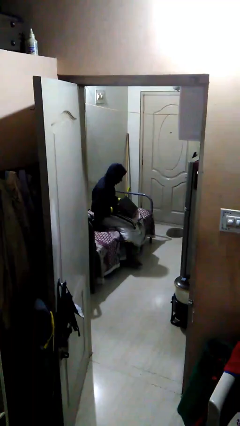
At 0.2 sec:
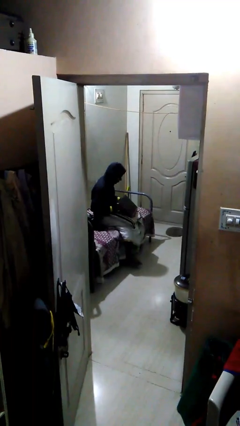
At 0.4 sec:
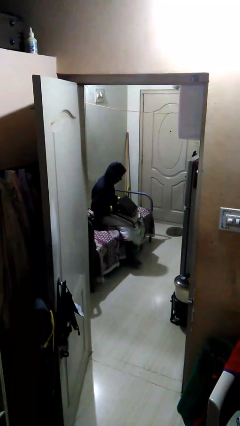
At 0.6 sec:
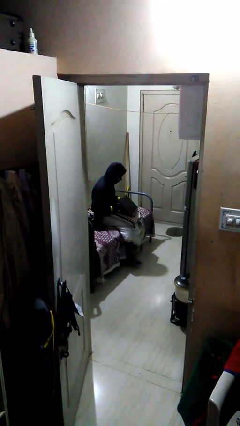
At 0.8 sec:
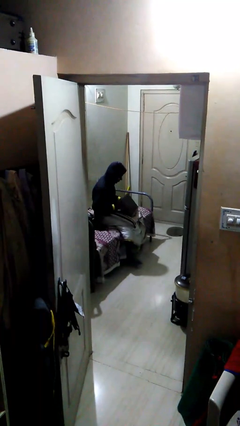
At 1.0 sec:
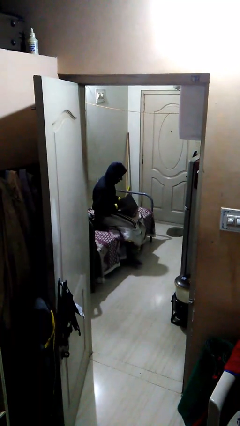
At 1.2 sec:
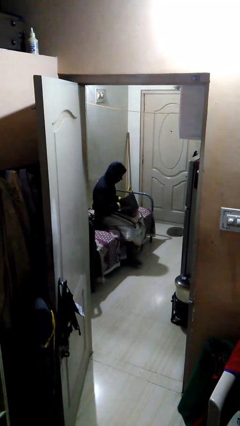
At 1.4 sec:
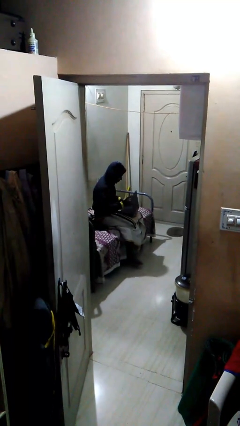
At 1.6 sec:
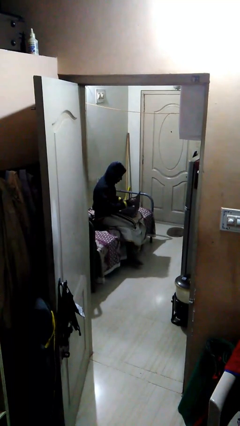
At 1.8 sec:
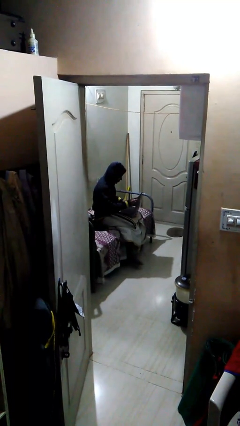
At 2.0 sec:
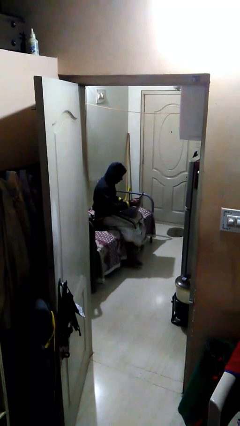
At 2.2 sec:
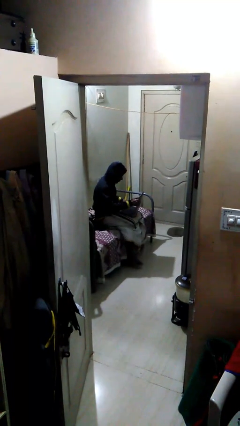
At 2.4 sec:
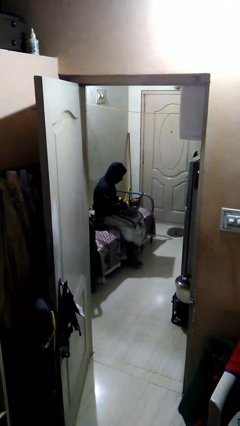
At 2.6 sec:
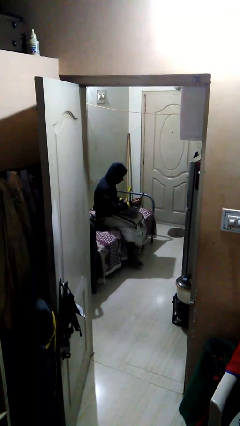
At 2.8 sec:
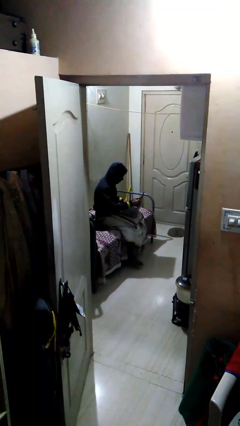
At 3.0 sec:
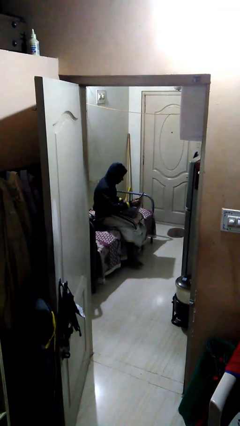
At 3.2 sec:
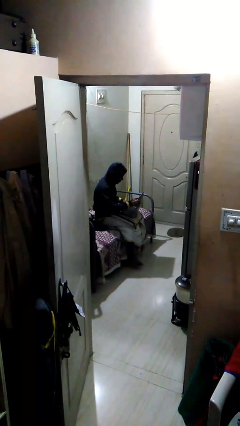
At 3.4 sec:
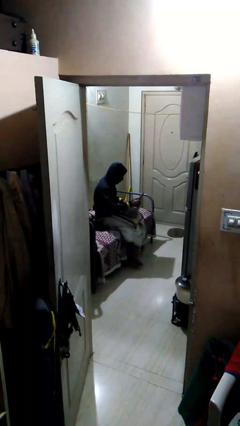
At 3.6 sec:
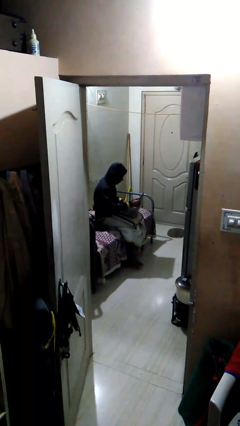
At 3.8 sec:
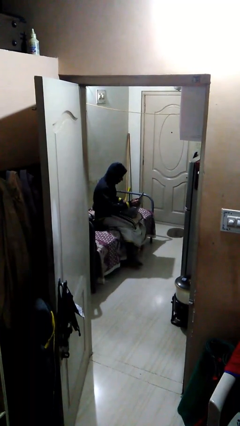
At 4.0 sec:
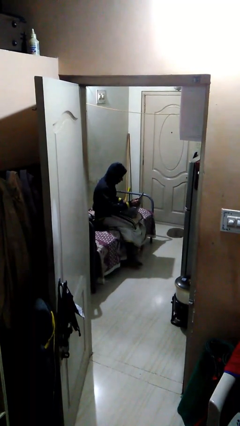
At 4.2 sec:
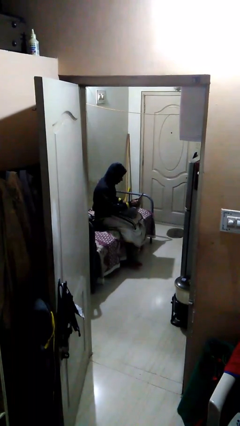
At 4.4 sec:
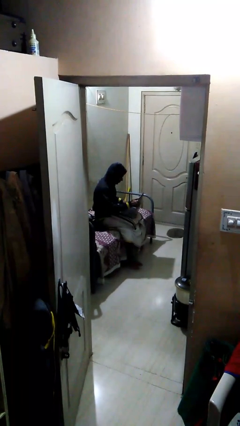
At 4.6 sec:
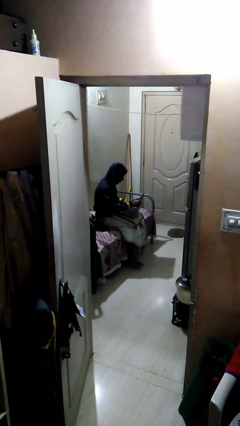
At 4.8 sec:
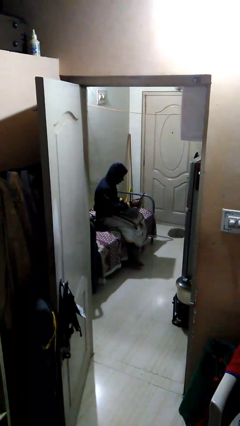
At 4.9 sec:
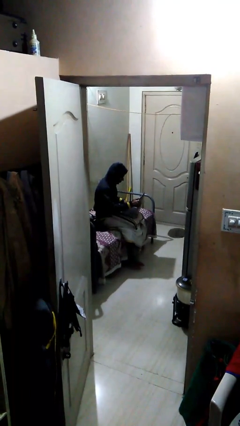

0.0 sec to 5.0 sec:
person interacts with laptop

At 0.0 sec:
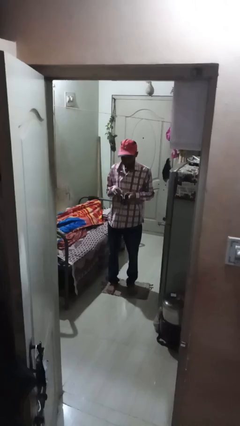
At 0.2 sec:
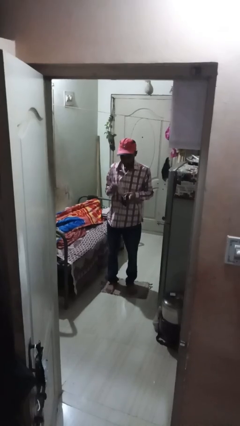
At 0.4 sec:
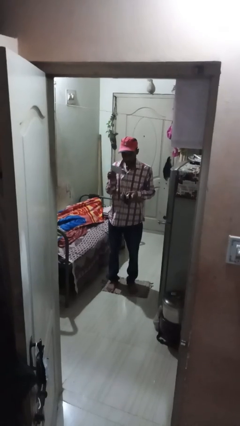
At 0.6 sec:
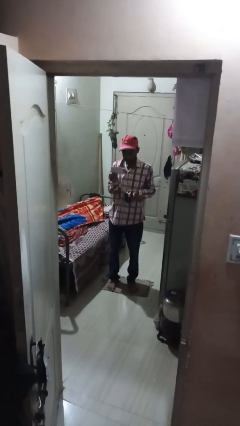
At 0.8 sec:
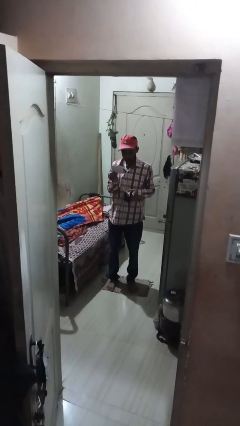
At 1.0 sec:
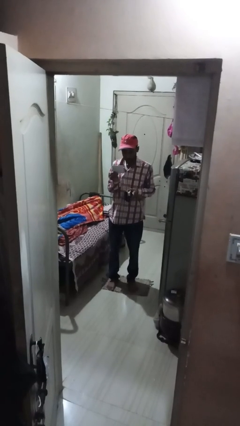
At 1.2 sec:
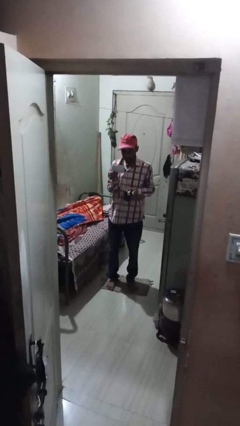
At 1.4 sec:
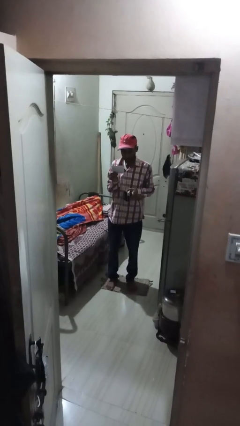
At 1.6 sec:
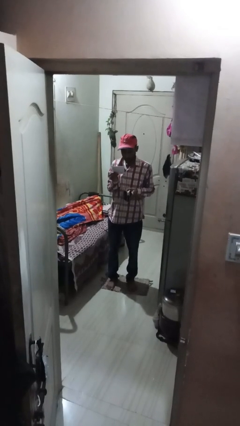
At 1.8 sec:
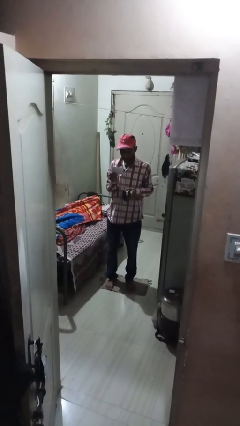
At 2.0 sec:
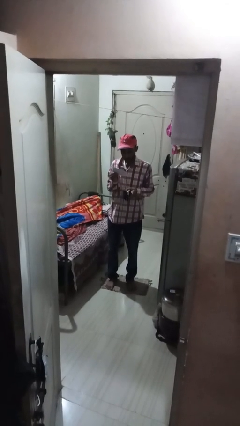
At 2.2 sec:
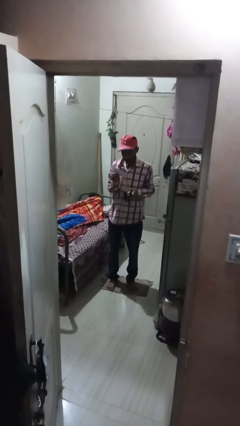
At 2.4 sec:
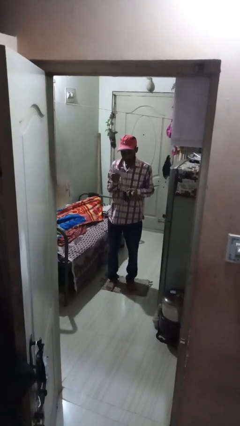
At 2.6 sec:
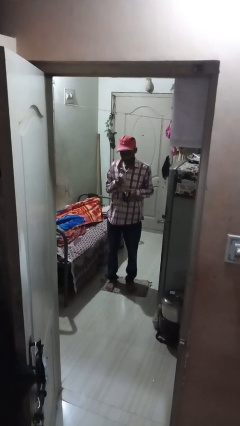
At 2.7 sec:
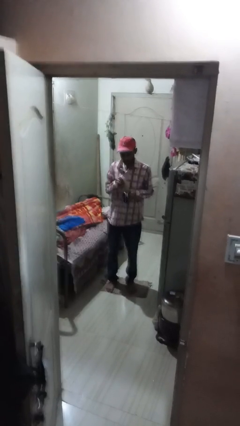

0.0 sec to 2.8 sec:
person takes object from purse

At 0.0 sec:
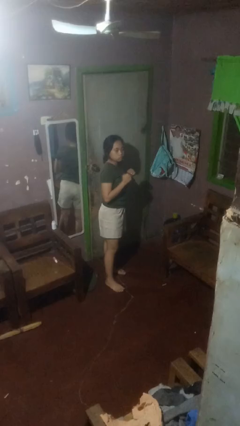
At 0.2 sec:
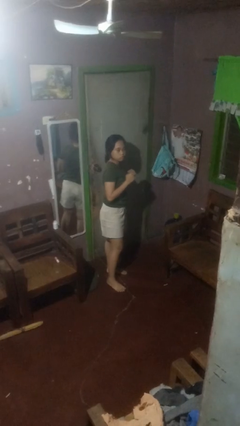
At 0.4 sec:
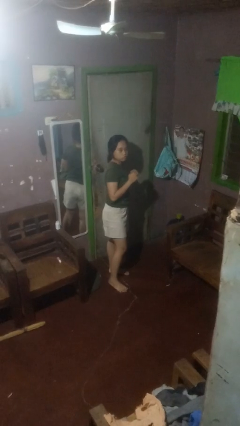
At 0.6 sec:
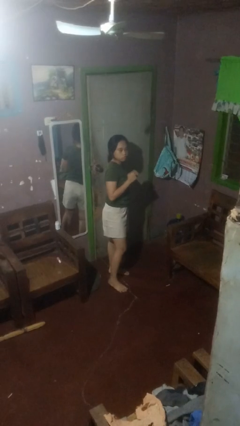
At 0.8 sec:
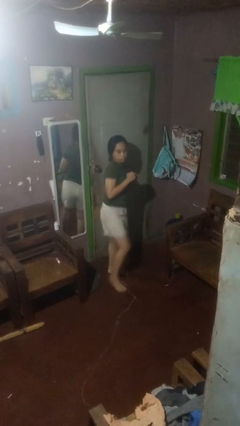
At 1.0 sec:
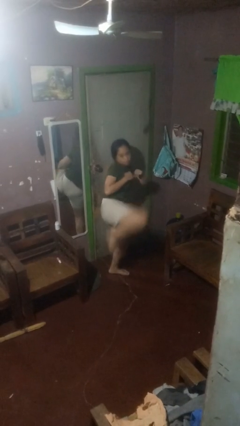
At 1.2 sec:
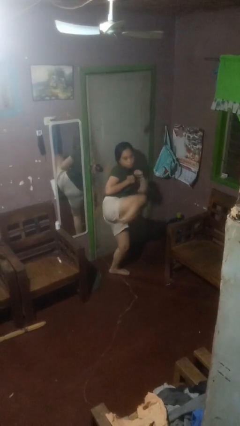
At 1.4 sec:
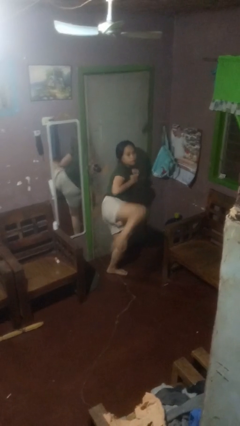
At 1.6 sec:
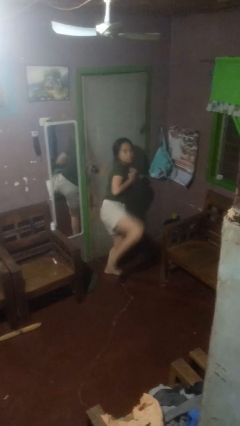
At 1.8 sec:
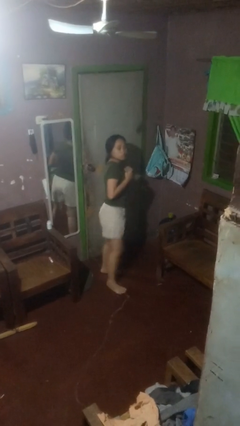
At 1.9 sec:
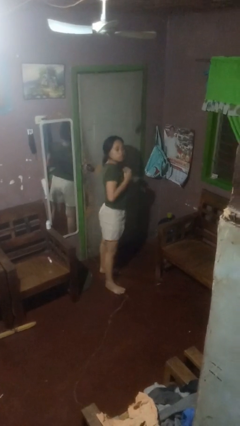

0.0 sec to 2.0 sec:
person karate kicks

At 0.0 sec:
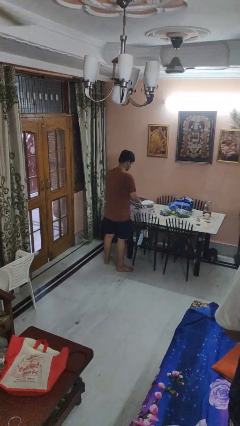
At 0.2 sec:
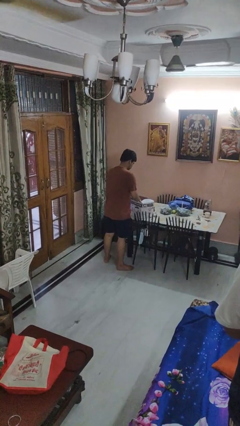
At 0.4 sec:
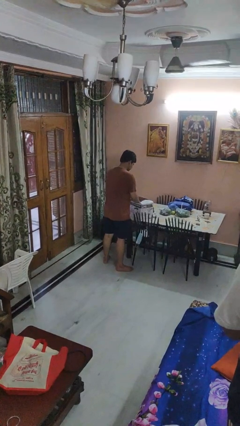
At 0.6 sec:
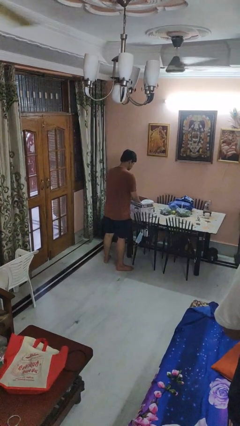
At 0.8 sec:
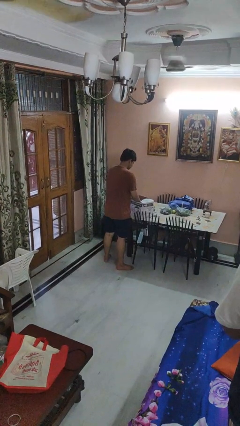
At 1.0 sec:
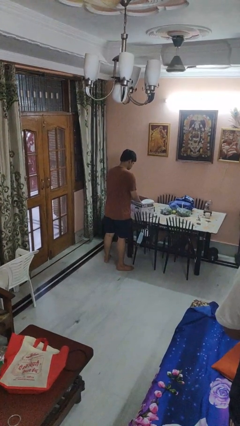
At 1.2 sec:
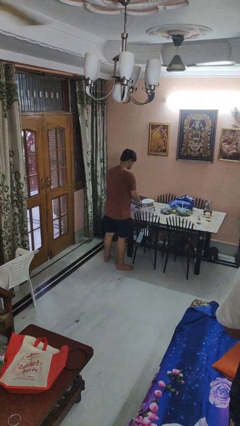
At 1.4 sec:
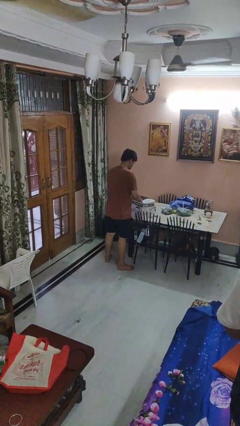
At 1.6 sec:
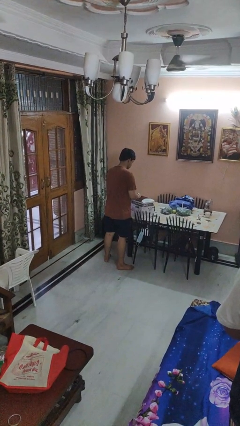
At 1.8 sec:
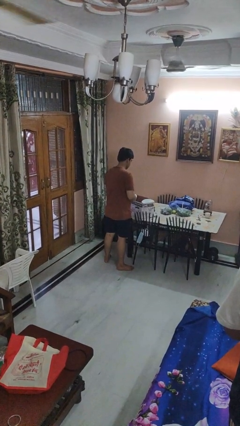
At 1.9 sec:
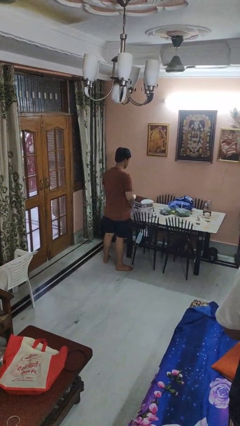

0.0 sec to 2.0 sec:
person searches in box

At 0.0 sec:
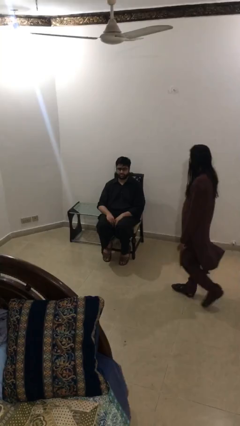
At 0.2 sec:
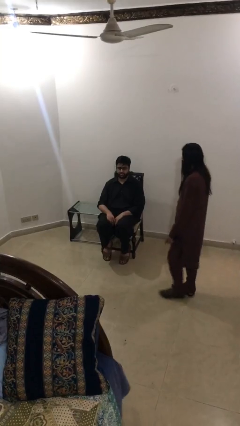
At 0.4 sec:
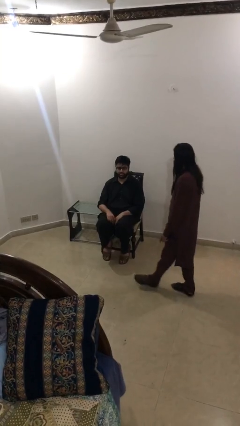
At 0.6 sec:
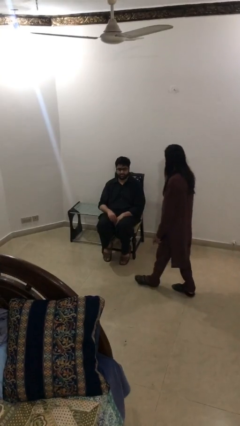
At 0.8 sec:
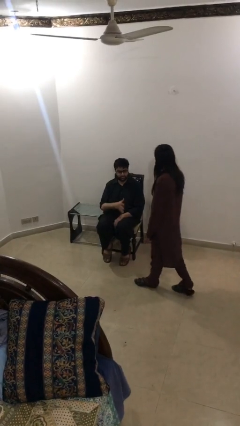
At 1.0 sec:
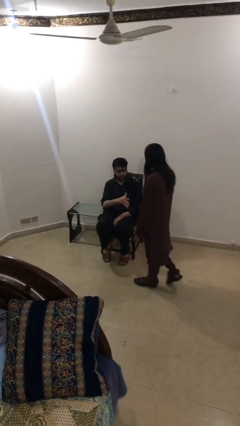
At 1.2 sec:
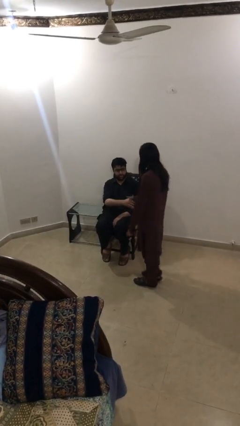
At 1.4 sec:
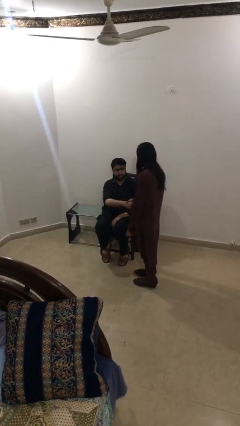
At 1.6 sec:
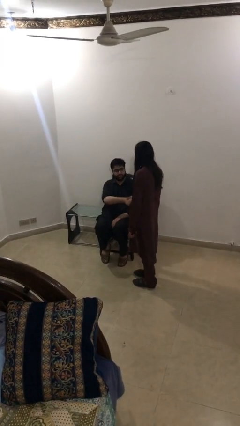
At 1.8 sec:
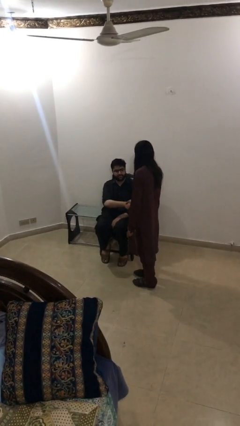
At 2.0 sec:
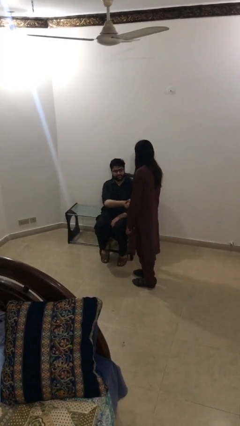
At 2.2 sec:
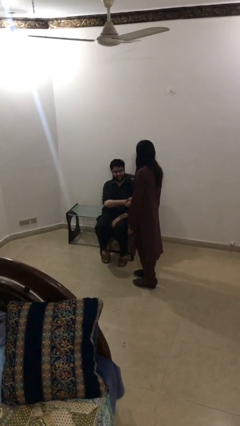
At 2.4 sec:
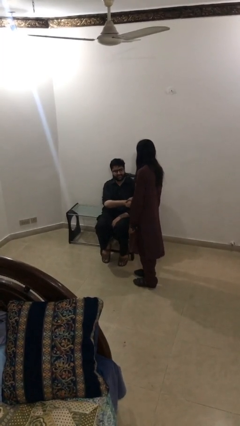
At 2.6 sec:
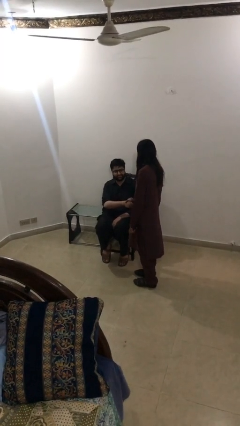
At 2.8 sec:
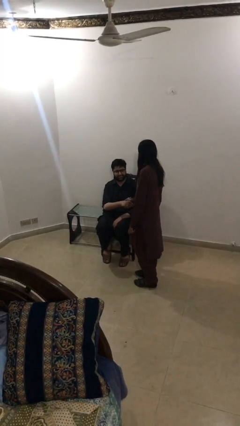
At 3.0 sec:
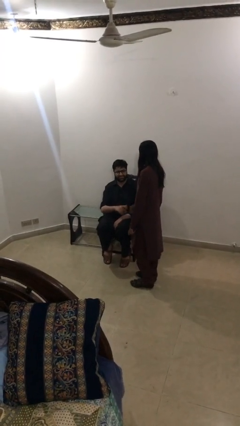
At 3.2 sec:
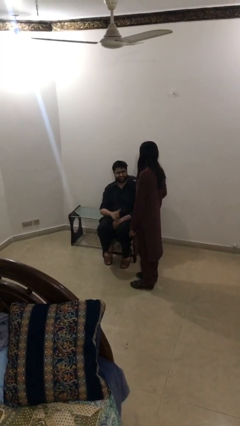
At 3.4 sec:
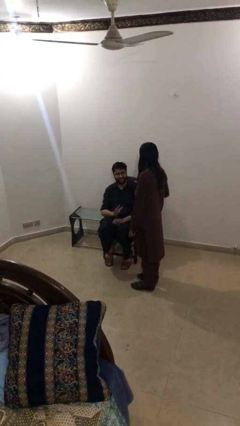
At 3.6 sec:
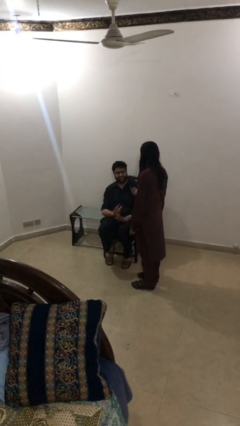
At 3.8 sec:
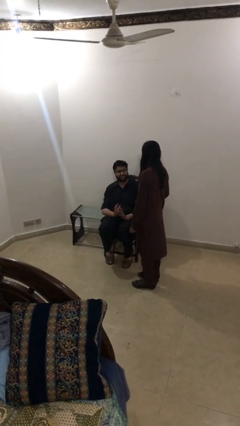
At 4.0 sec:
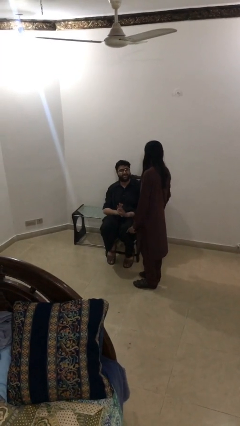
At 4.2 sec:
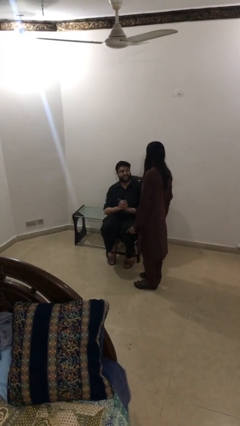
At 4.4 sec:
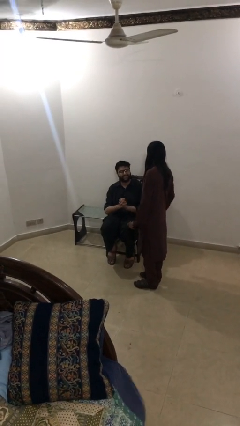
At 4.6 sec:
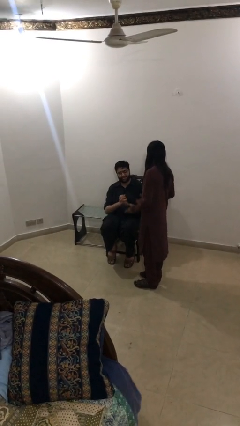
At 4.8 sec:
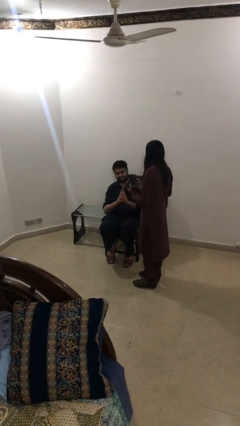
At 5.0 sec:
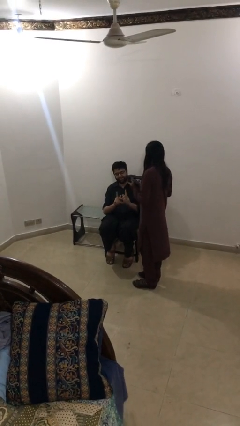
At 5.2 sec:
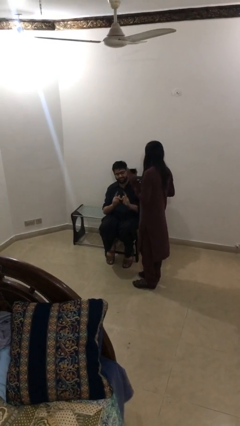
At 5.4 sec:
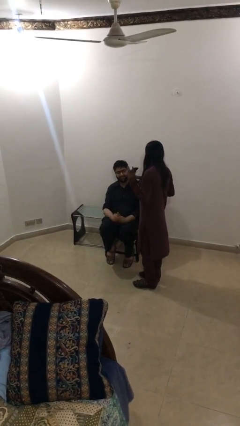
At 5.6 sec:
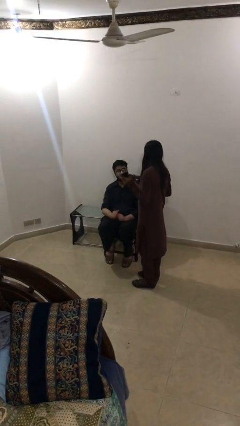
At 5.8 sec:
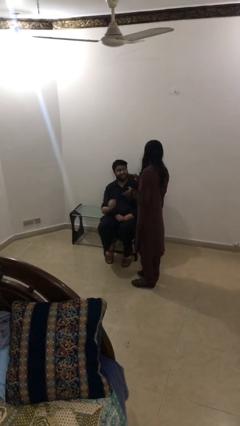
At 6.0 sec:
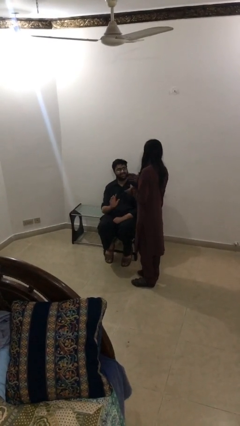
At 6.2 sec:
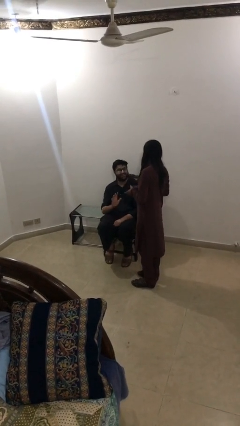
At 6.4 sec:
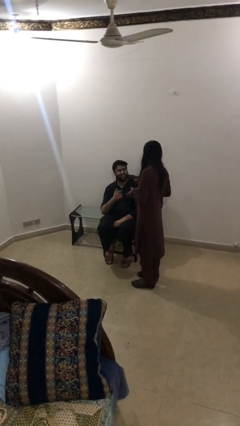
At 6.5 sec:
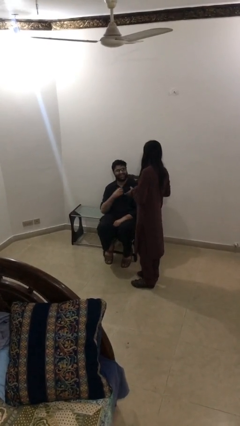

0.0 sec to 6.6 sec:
person shakes hand
